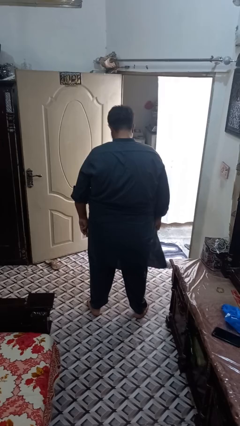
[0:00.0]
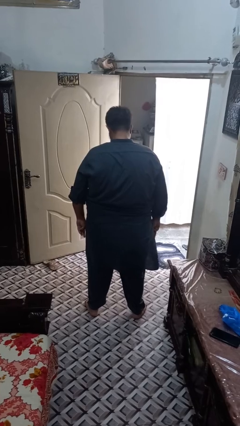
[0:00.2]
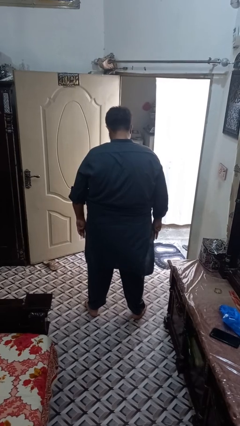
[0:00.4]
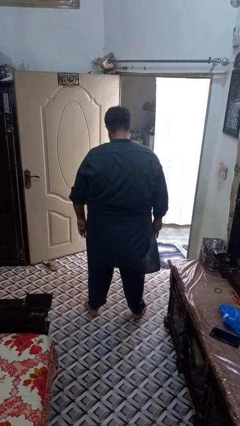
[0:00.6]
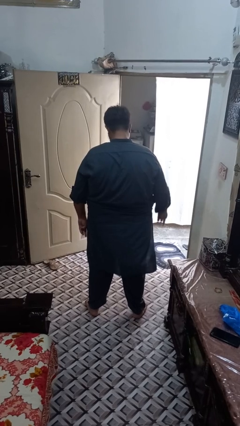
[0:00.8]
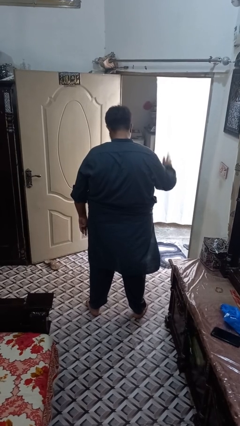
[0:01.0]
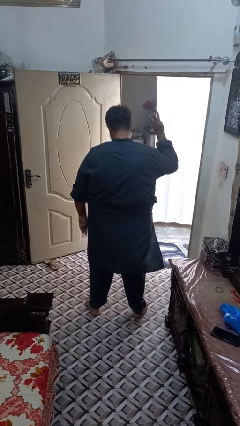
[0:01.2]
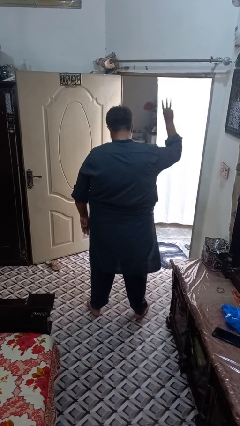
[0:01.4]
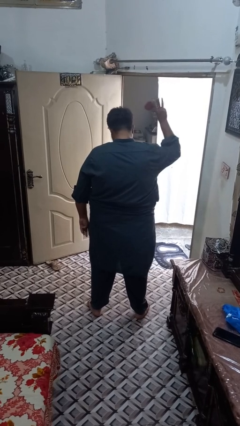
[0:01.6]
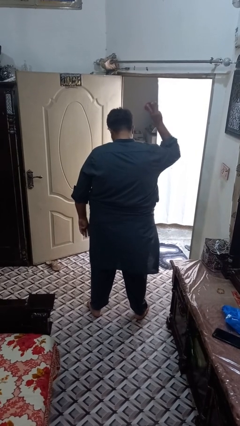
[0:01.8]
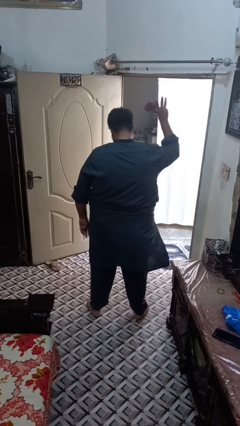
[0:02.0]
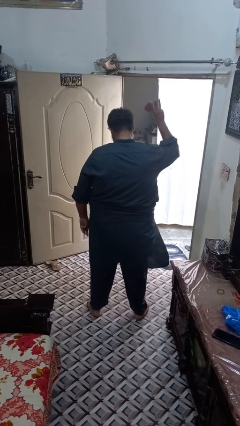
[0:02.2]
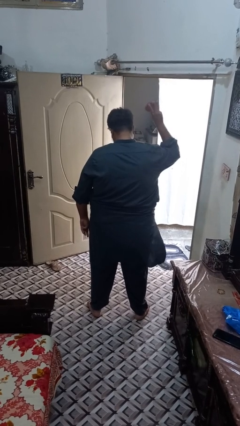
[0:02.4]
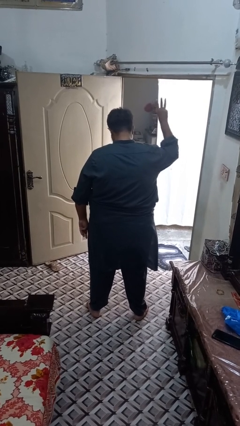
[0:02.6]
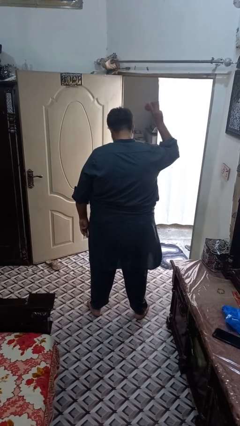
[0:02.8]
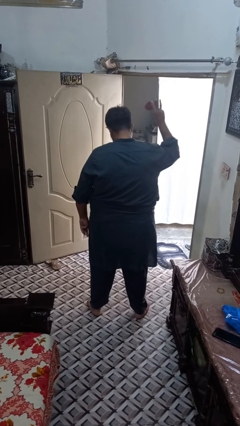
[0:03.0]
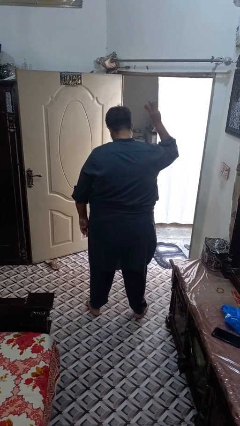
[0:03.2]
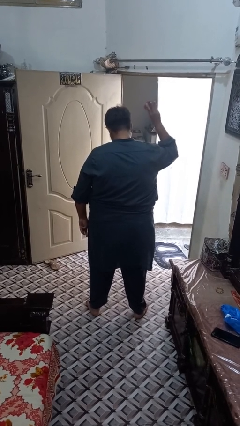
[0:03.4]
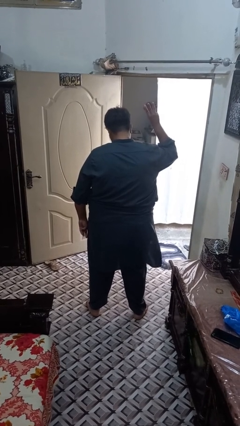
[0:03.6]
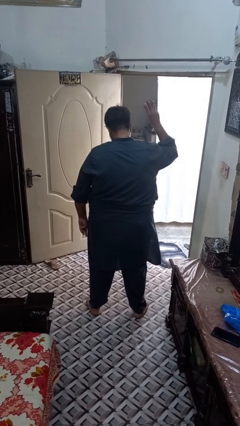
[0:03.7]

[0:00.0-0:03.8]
person gestures number three

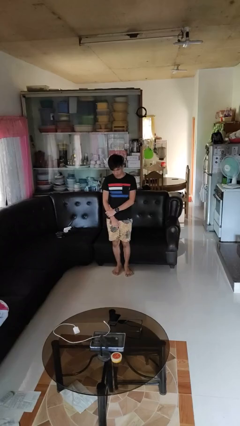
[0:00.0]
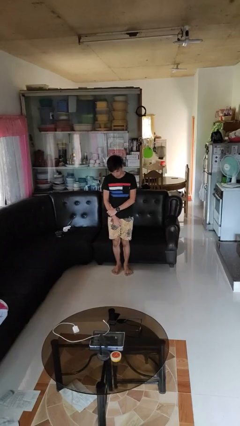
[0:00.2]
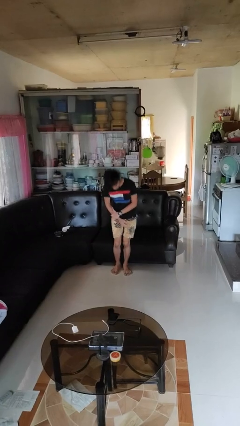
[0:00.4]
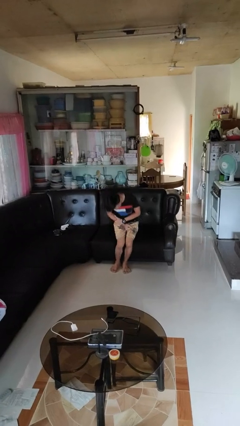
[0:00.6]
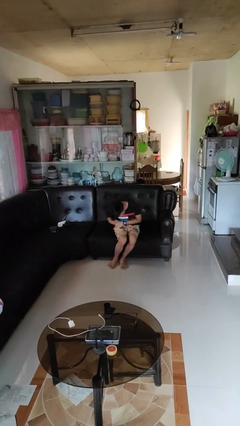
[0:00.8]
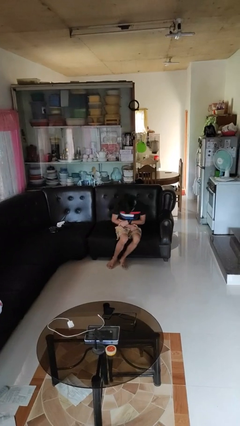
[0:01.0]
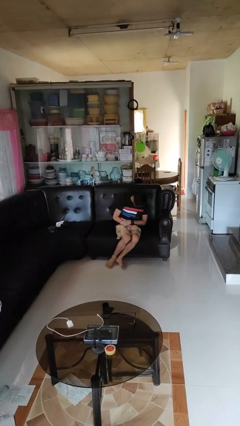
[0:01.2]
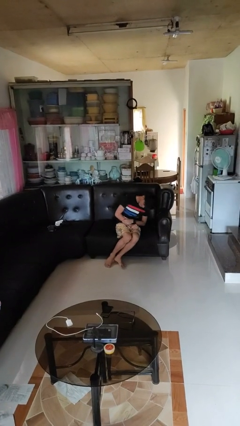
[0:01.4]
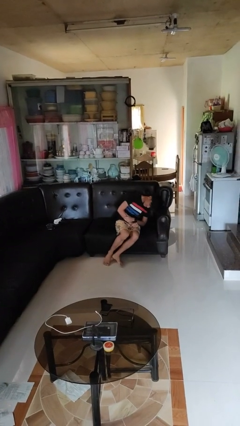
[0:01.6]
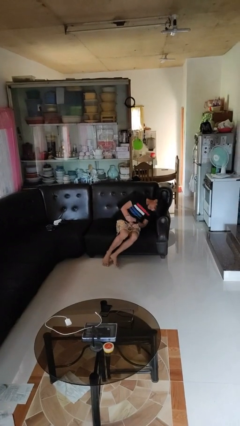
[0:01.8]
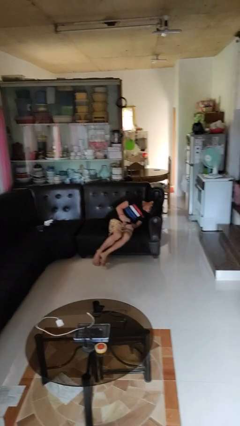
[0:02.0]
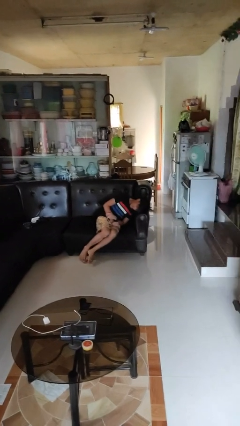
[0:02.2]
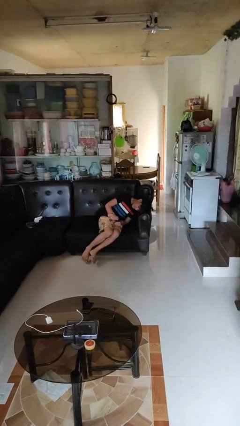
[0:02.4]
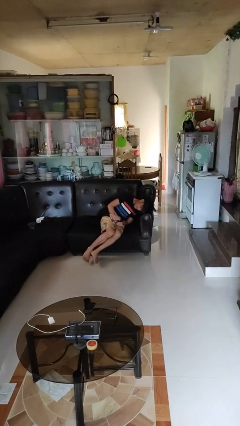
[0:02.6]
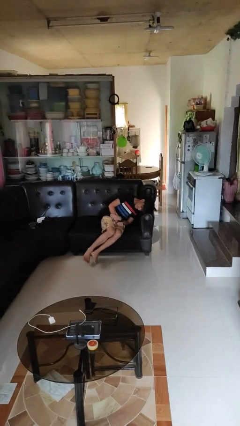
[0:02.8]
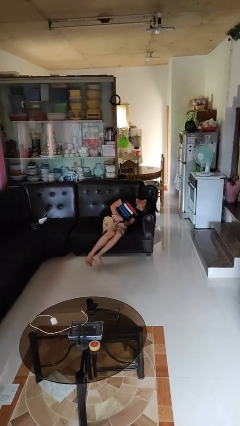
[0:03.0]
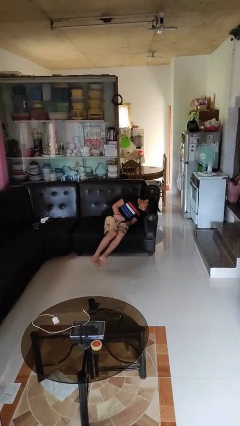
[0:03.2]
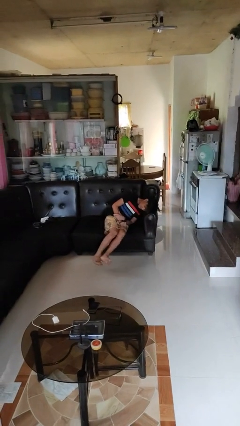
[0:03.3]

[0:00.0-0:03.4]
person lies down on couch

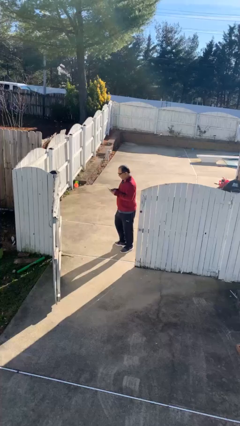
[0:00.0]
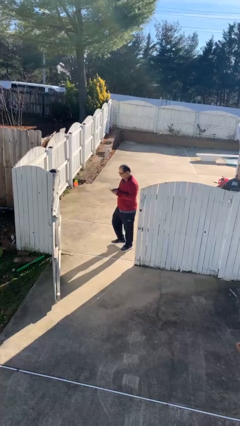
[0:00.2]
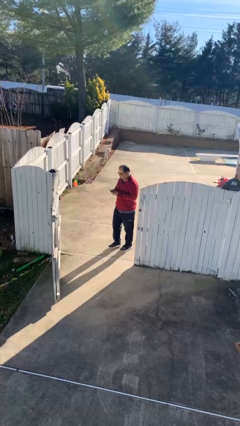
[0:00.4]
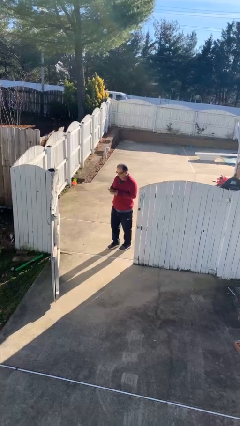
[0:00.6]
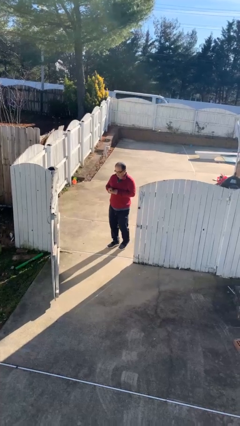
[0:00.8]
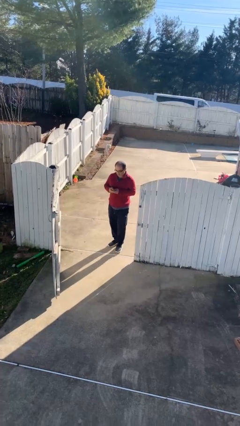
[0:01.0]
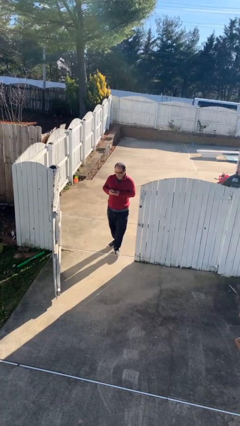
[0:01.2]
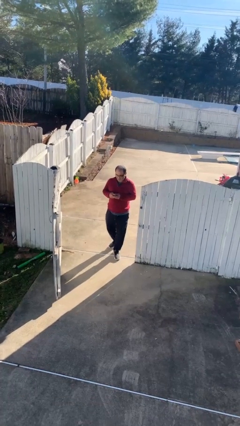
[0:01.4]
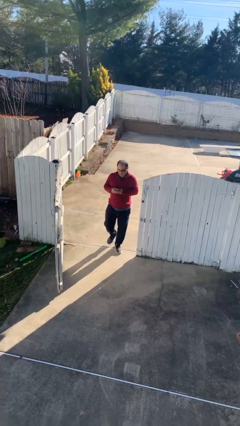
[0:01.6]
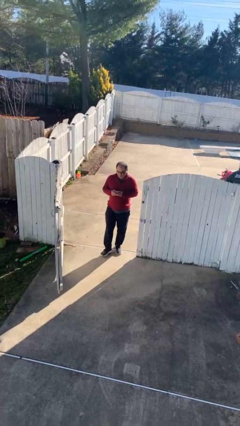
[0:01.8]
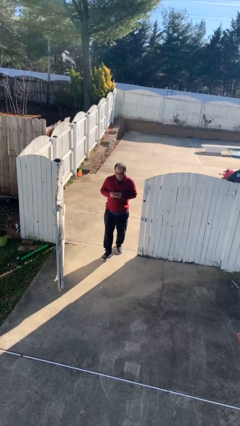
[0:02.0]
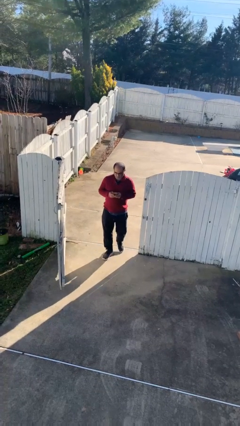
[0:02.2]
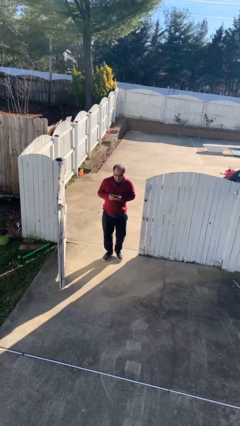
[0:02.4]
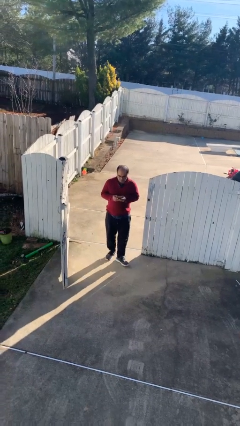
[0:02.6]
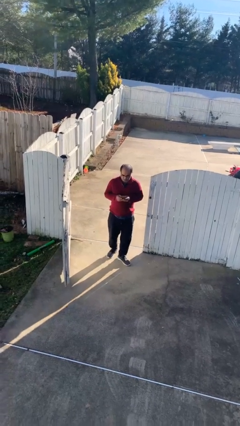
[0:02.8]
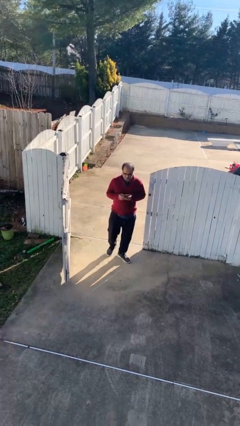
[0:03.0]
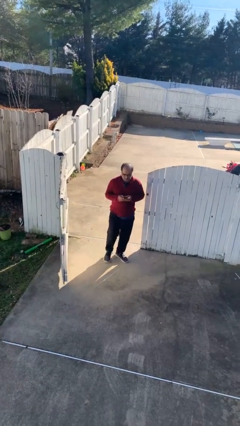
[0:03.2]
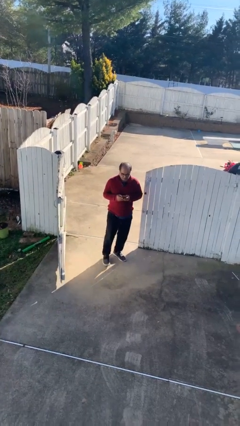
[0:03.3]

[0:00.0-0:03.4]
person enters scene through structure

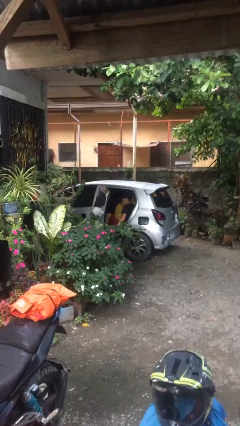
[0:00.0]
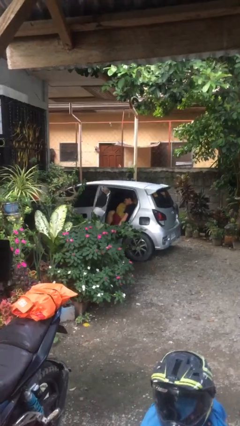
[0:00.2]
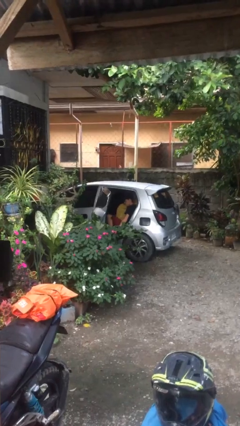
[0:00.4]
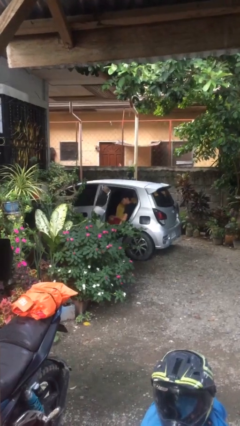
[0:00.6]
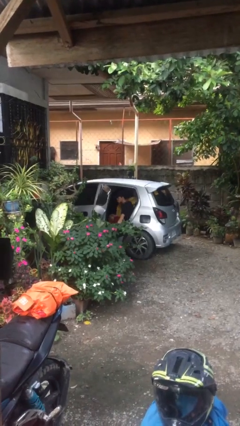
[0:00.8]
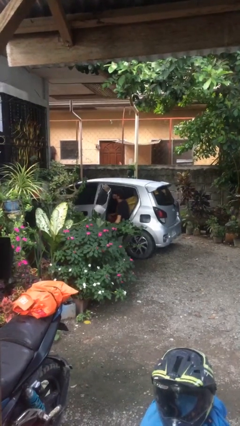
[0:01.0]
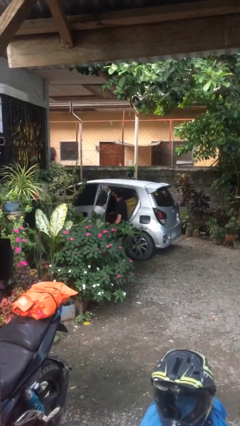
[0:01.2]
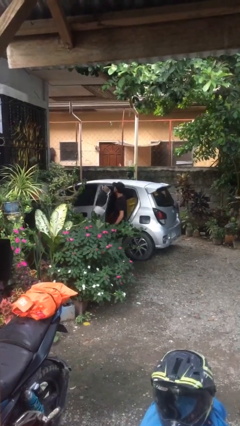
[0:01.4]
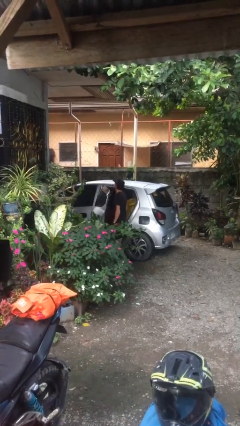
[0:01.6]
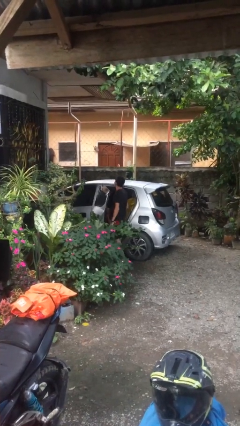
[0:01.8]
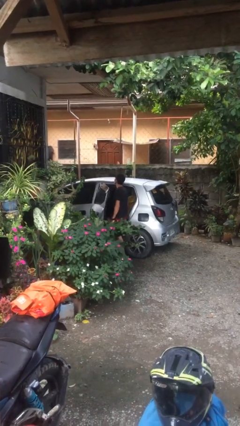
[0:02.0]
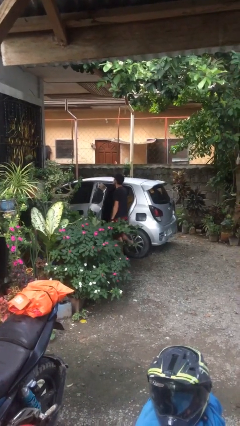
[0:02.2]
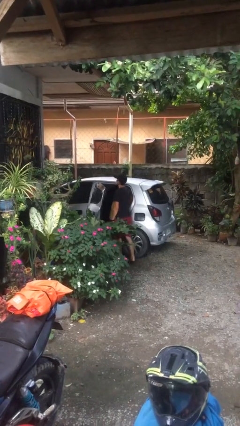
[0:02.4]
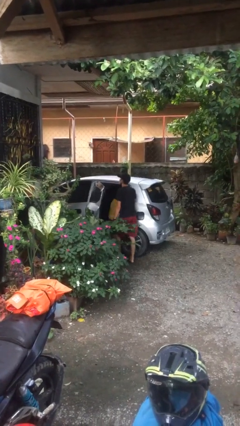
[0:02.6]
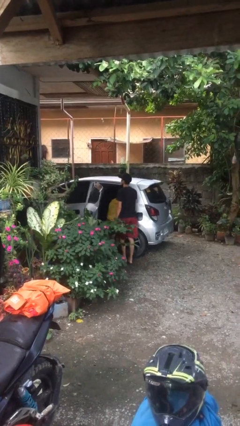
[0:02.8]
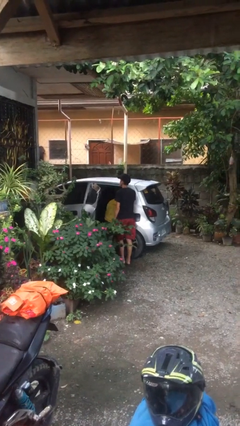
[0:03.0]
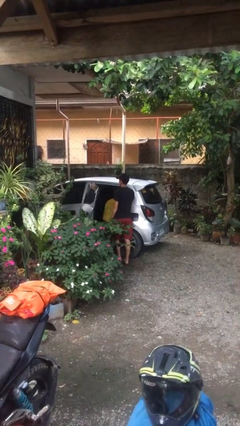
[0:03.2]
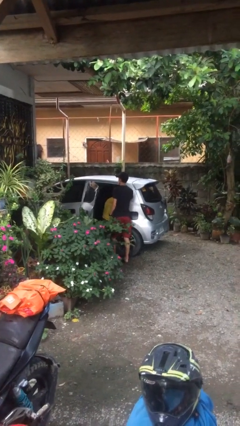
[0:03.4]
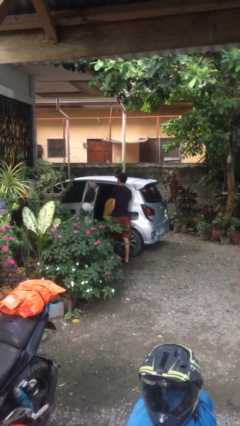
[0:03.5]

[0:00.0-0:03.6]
person exits car

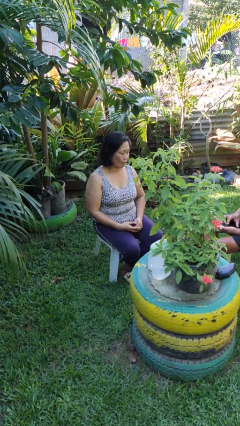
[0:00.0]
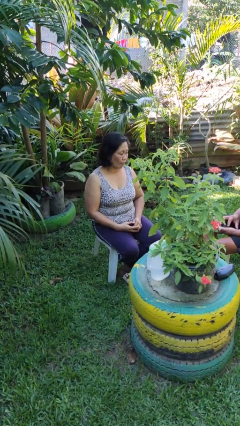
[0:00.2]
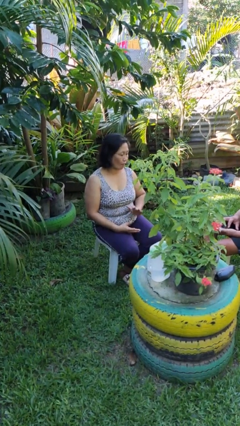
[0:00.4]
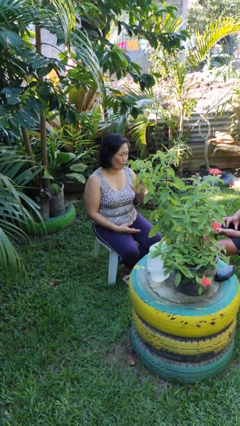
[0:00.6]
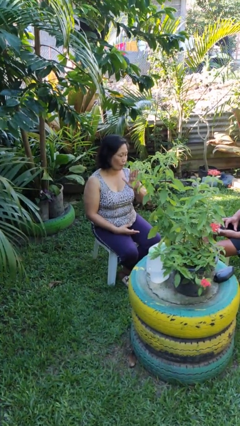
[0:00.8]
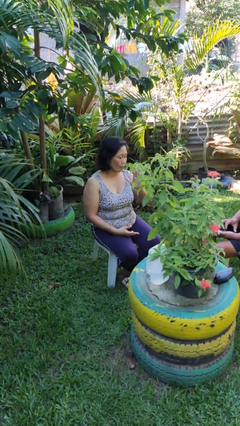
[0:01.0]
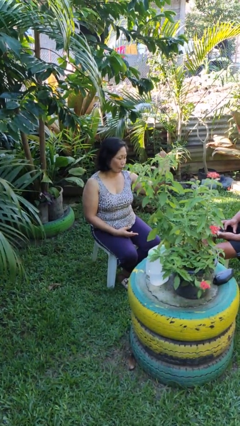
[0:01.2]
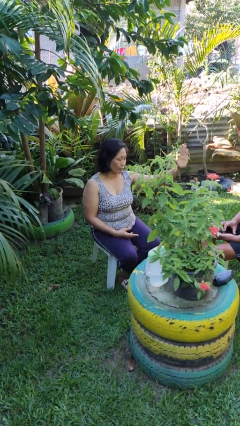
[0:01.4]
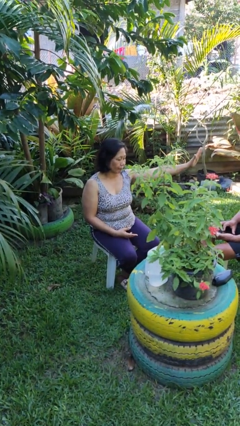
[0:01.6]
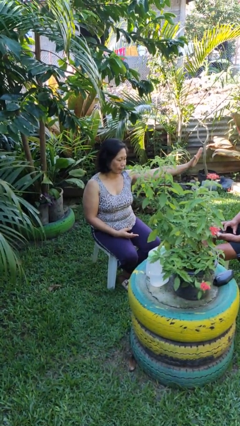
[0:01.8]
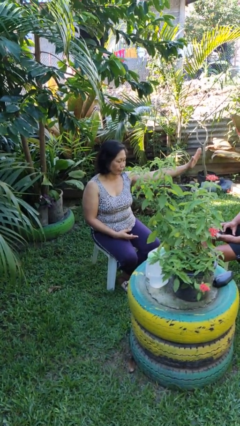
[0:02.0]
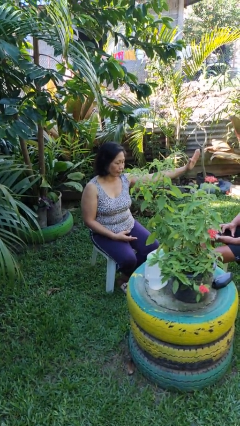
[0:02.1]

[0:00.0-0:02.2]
person gestures swipe left

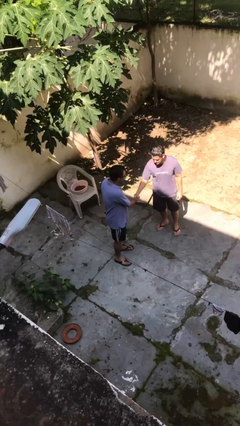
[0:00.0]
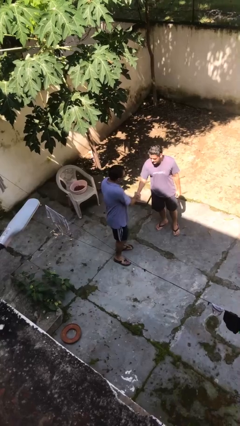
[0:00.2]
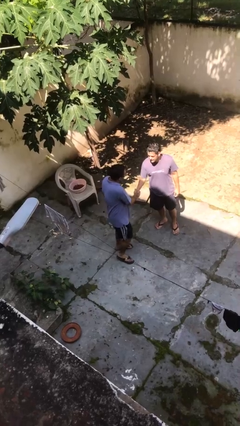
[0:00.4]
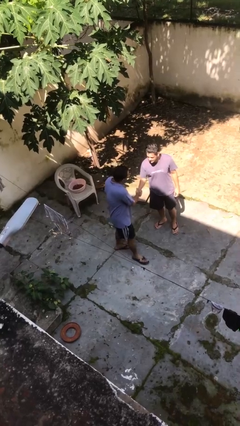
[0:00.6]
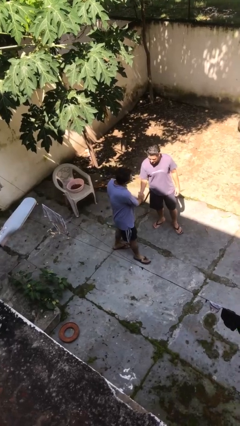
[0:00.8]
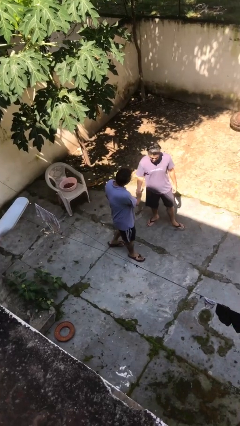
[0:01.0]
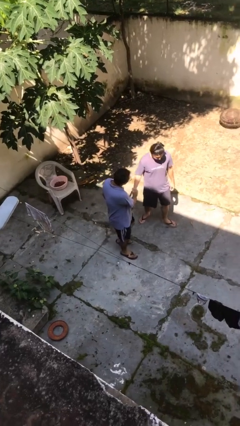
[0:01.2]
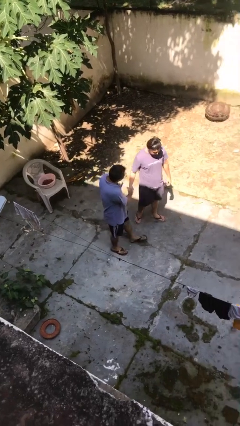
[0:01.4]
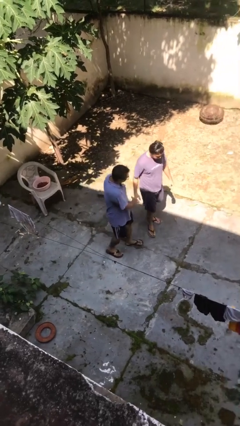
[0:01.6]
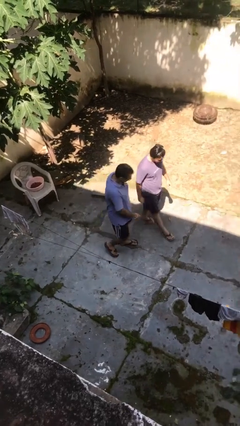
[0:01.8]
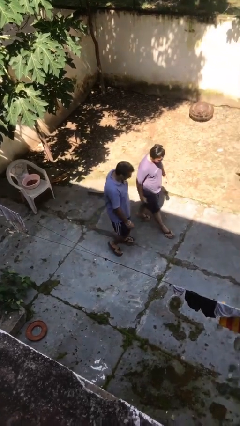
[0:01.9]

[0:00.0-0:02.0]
person shakes hand
